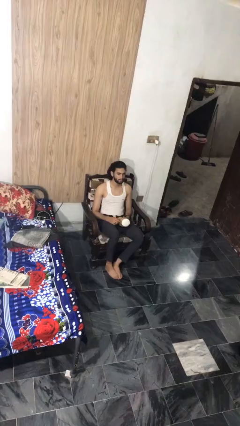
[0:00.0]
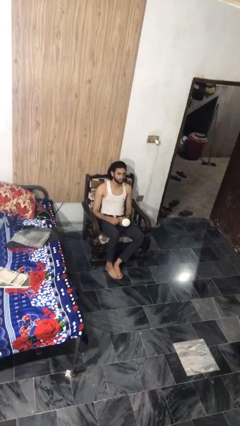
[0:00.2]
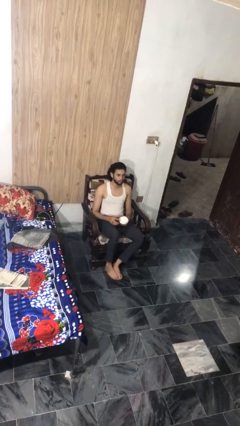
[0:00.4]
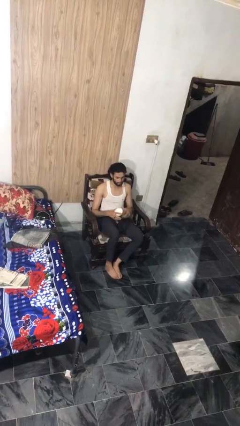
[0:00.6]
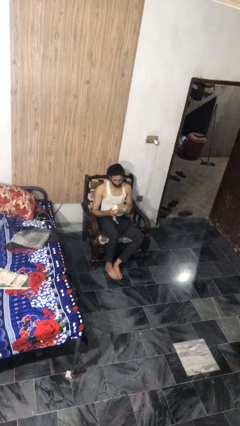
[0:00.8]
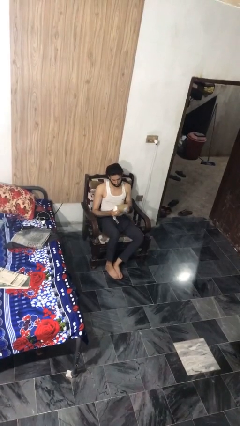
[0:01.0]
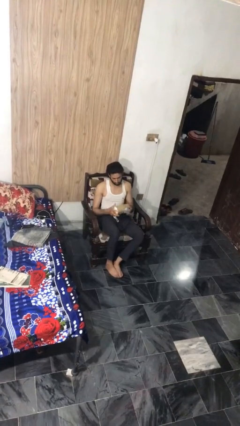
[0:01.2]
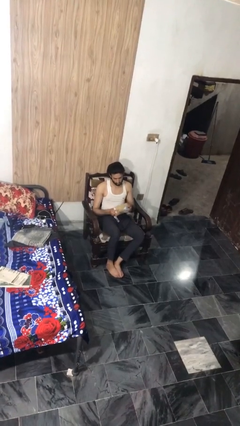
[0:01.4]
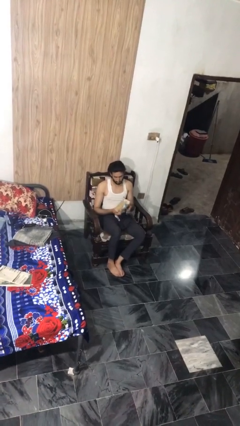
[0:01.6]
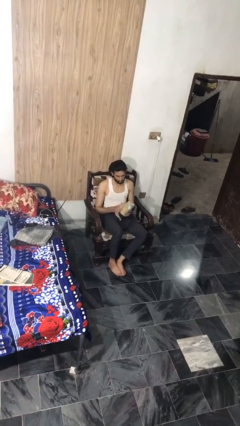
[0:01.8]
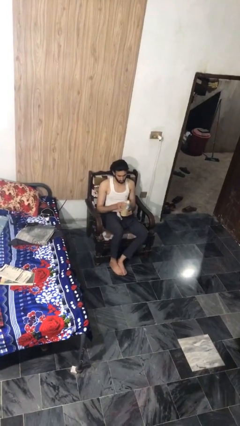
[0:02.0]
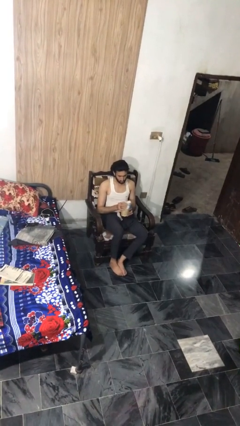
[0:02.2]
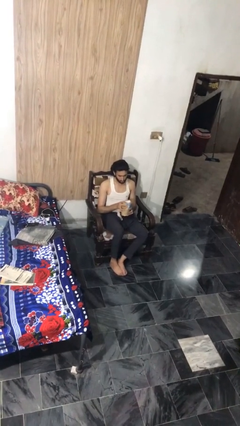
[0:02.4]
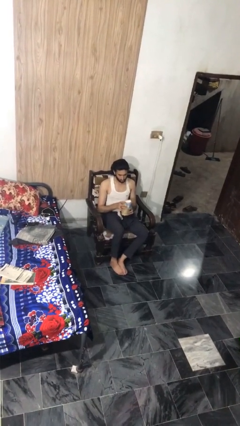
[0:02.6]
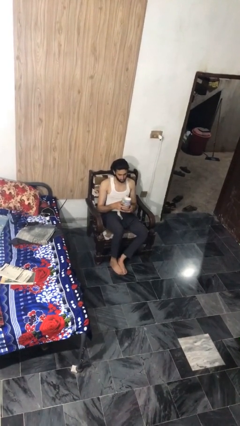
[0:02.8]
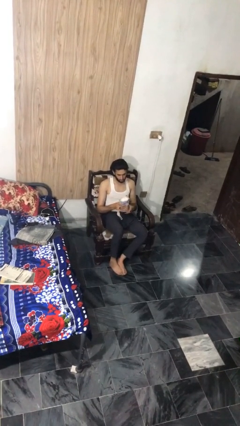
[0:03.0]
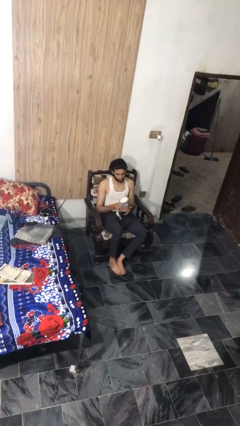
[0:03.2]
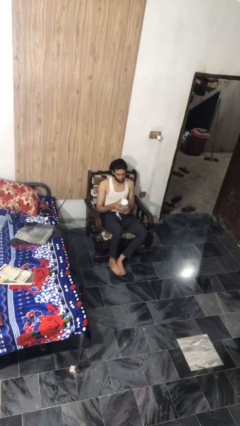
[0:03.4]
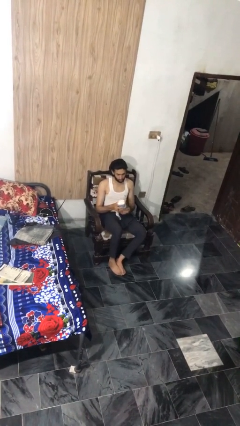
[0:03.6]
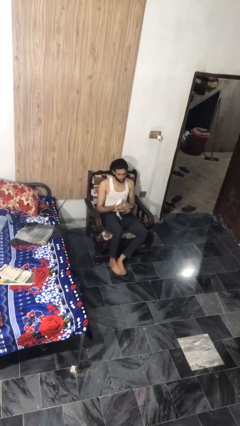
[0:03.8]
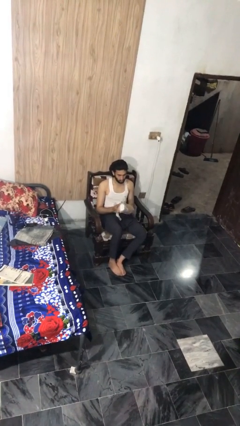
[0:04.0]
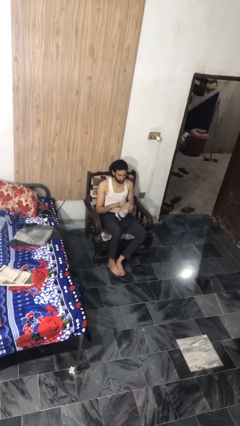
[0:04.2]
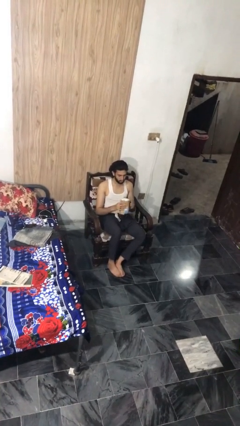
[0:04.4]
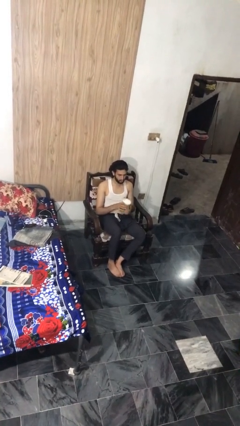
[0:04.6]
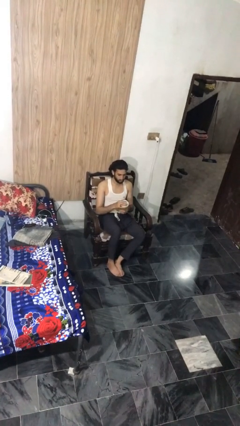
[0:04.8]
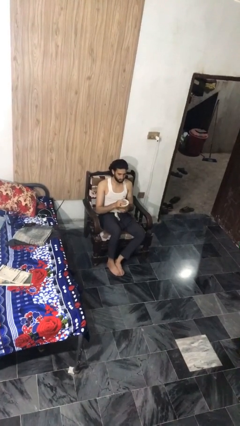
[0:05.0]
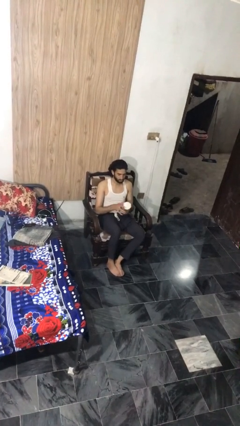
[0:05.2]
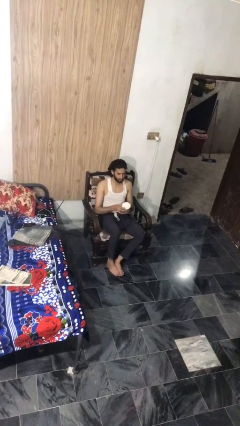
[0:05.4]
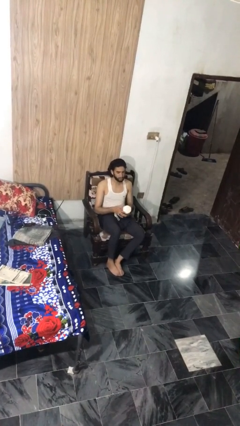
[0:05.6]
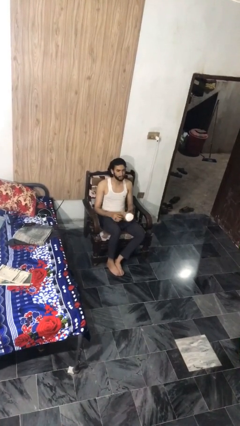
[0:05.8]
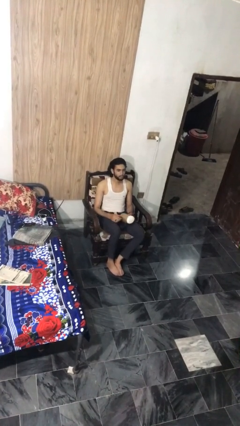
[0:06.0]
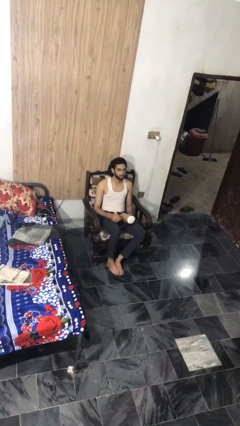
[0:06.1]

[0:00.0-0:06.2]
person squeezes object

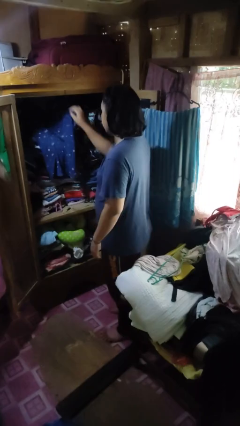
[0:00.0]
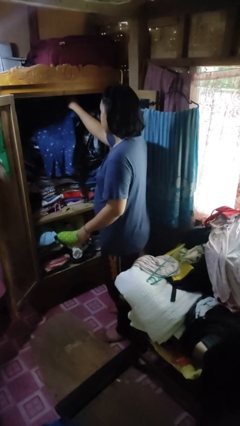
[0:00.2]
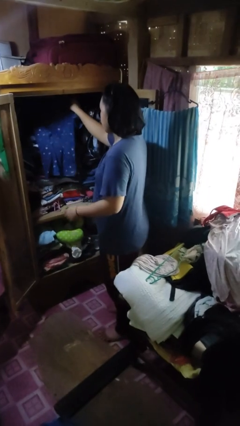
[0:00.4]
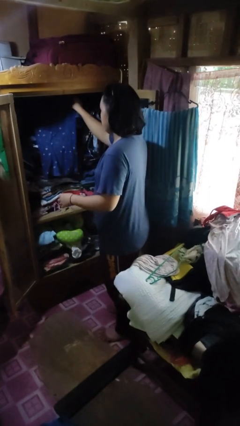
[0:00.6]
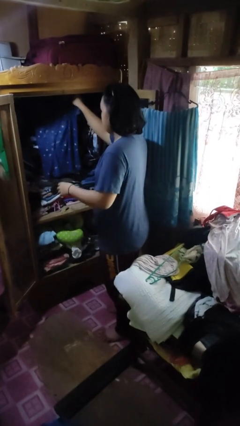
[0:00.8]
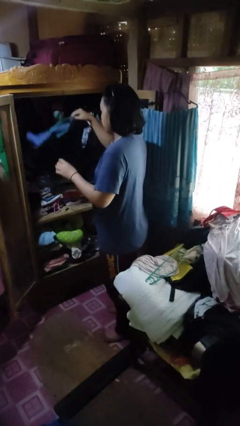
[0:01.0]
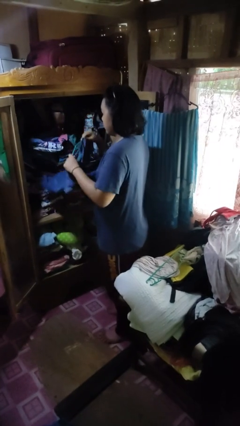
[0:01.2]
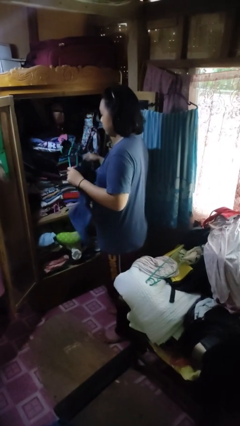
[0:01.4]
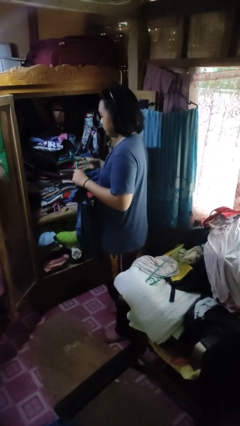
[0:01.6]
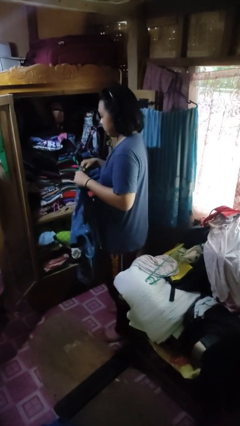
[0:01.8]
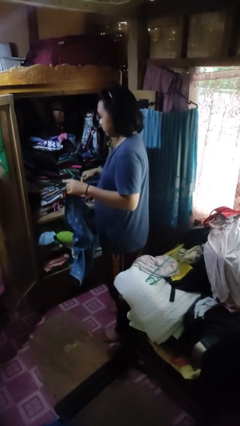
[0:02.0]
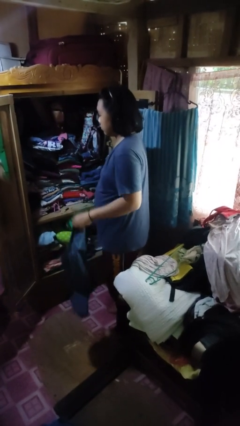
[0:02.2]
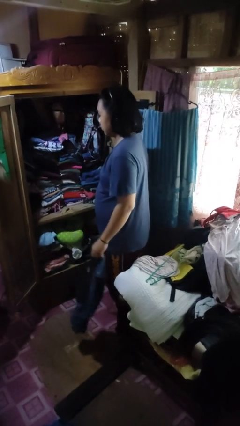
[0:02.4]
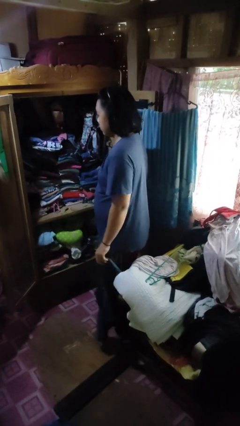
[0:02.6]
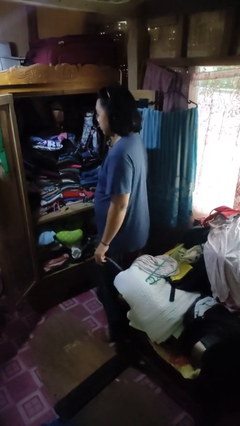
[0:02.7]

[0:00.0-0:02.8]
person takes clothes from closet

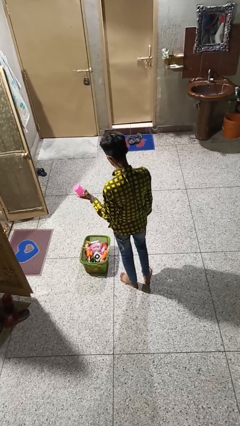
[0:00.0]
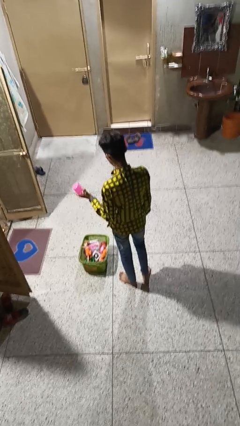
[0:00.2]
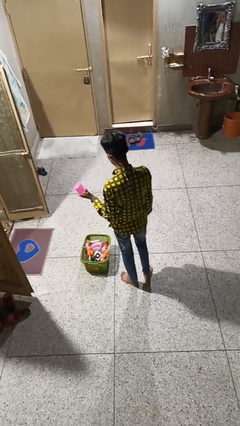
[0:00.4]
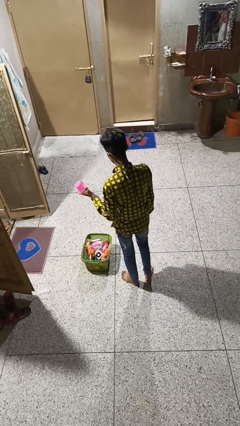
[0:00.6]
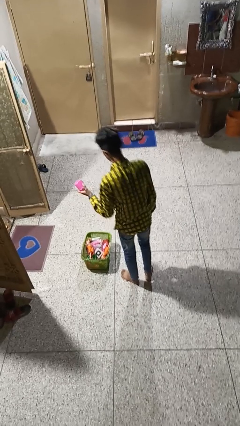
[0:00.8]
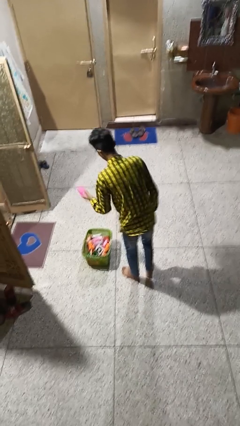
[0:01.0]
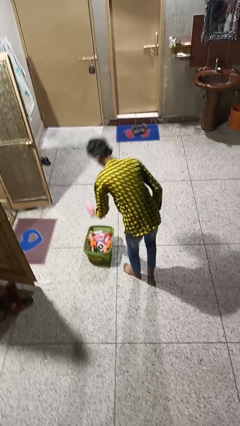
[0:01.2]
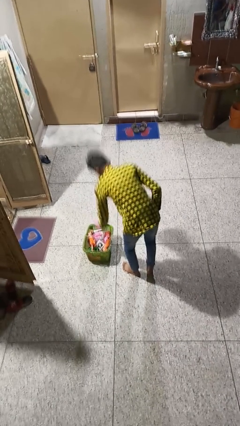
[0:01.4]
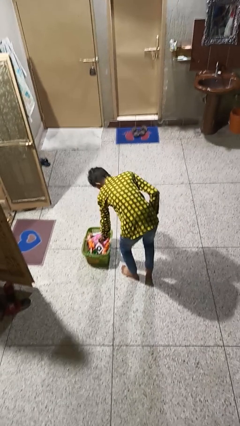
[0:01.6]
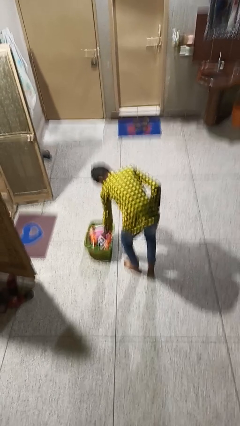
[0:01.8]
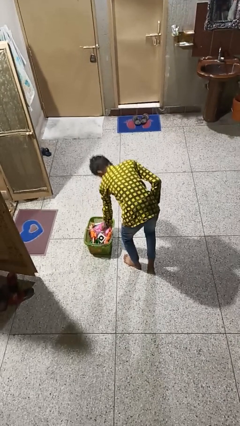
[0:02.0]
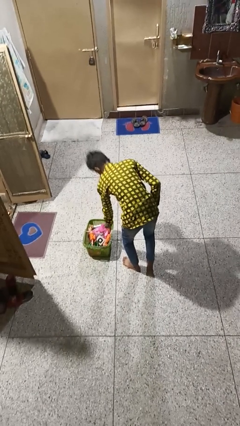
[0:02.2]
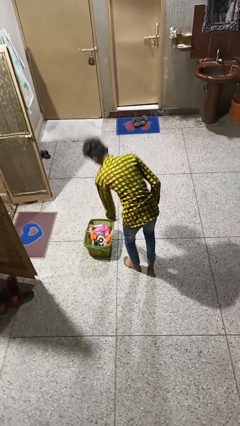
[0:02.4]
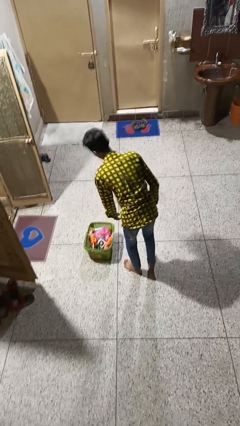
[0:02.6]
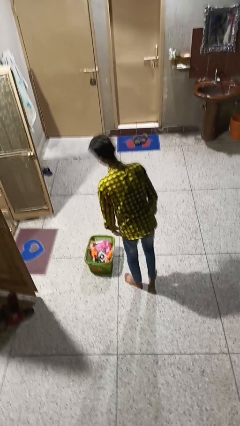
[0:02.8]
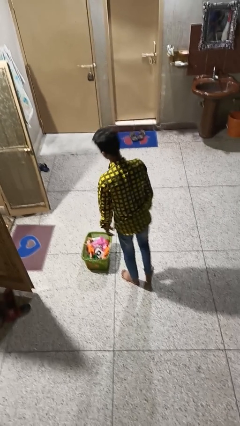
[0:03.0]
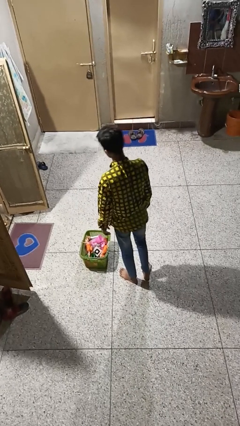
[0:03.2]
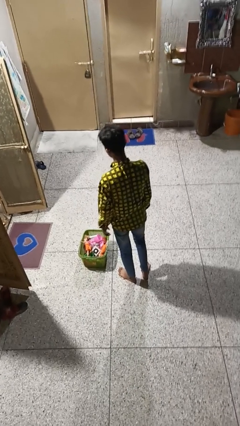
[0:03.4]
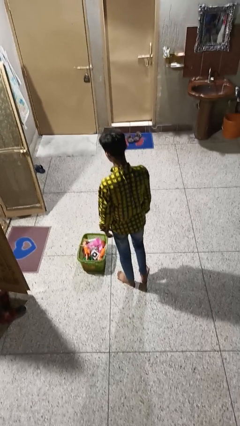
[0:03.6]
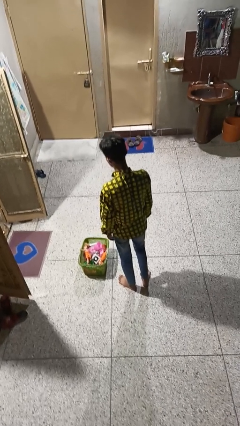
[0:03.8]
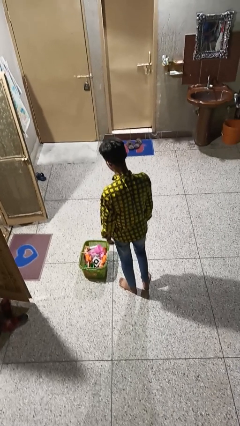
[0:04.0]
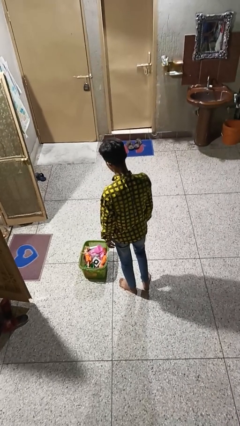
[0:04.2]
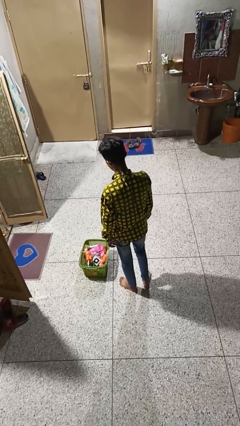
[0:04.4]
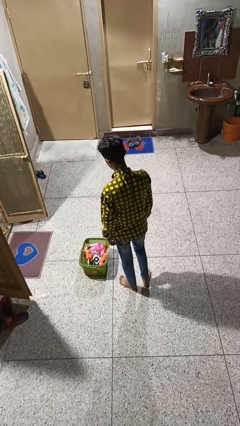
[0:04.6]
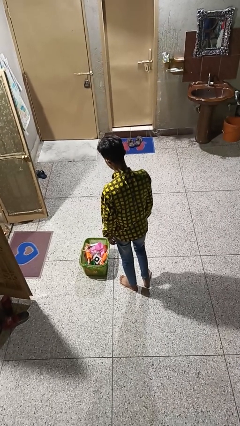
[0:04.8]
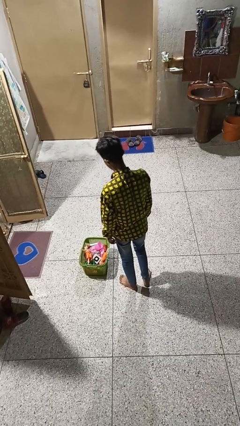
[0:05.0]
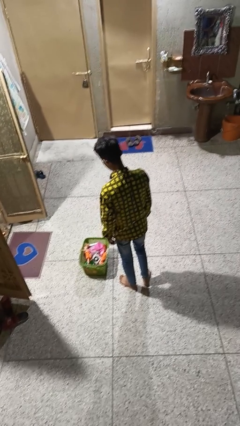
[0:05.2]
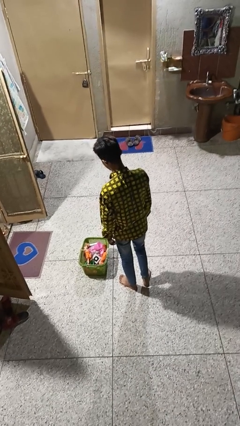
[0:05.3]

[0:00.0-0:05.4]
person takes object from basket

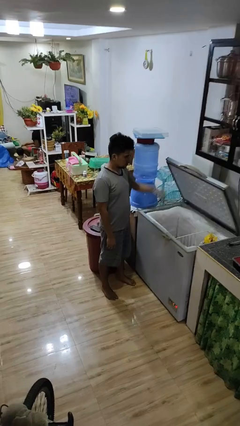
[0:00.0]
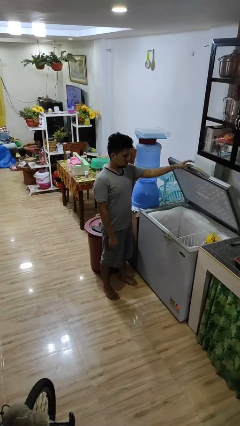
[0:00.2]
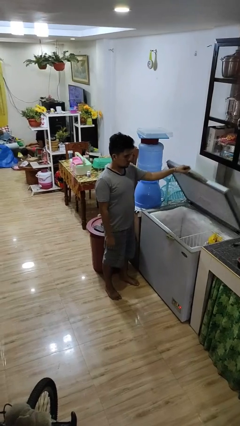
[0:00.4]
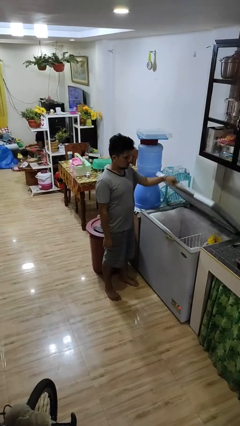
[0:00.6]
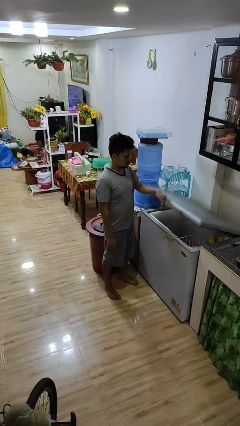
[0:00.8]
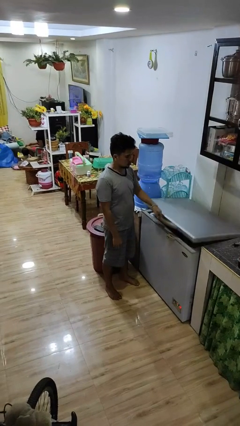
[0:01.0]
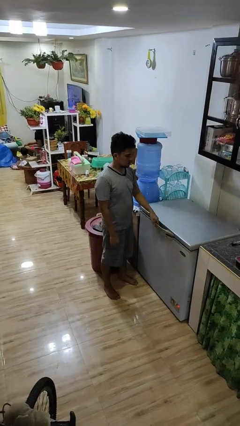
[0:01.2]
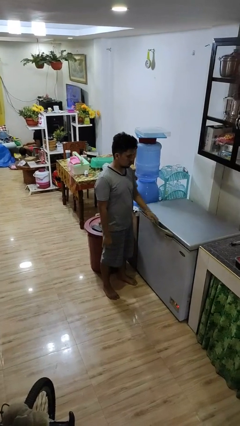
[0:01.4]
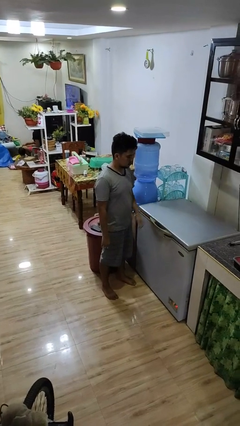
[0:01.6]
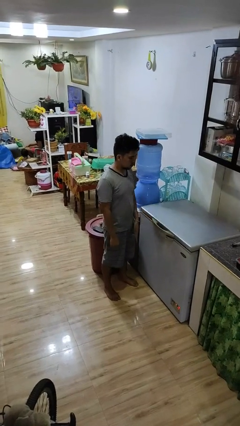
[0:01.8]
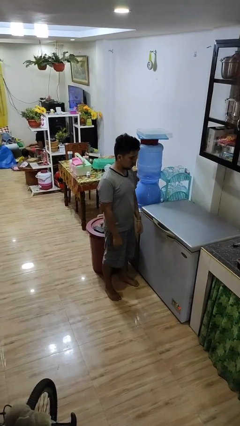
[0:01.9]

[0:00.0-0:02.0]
person closes refrigerator

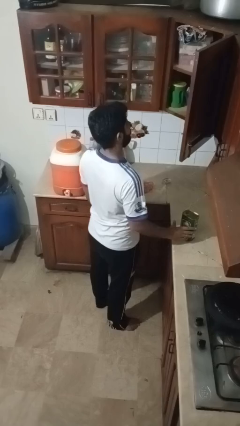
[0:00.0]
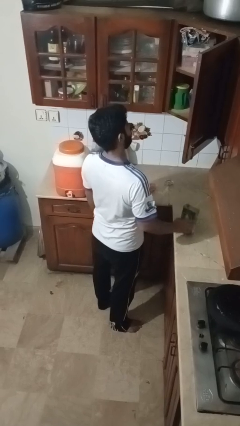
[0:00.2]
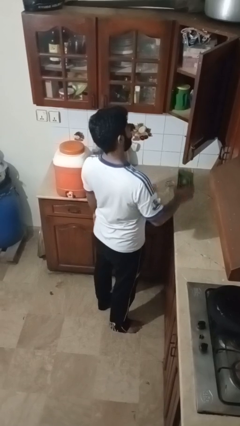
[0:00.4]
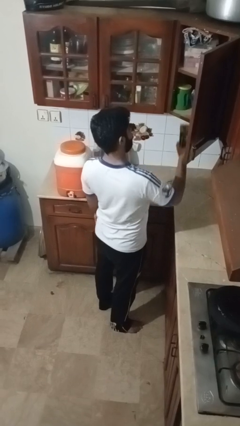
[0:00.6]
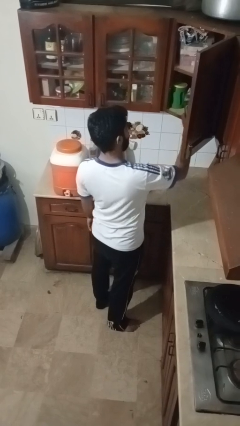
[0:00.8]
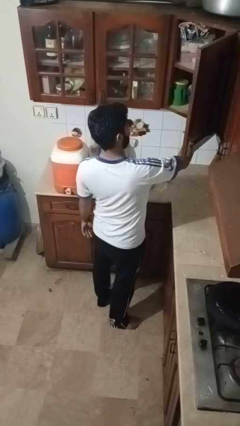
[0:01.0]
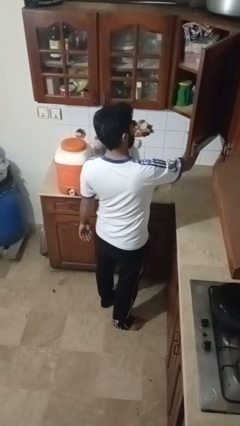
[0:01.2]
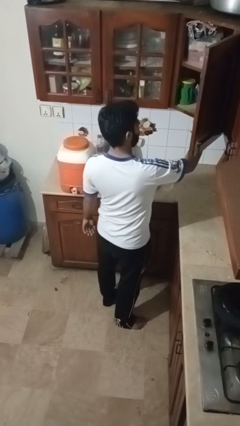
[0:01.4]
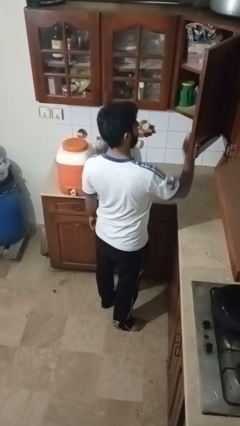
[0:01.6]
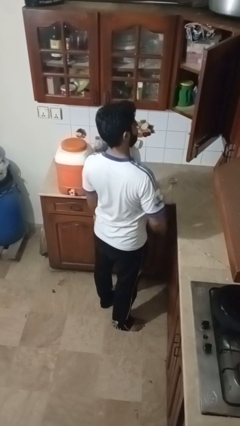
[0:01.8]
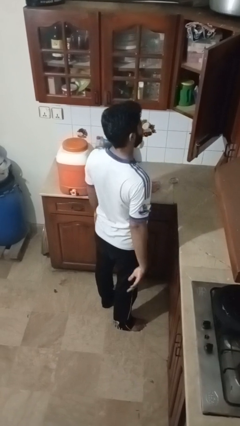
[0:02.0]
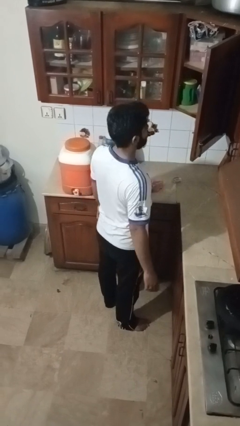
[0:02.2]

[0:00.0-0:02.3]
person puts object in cabinet
